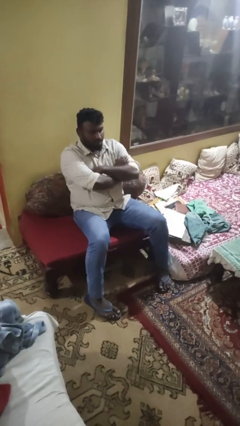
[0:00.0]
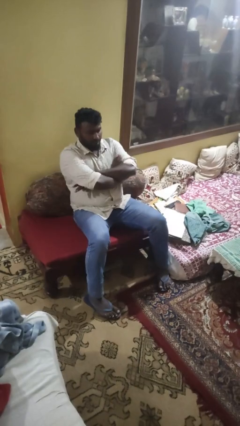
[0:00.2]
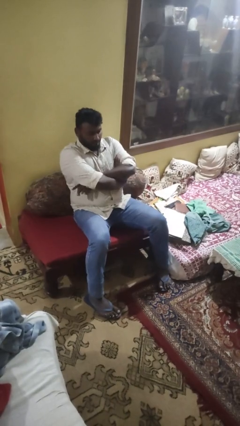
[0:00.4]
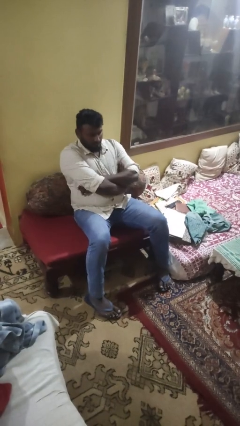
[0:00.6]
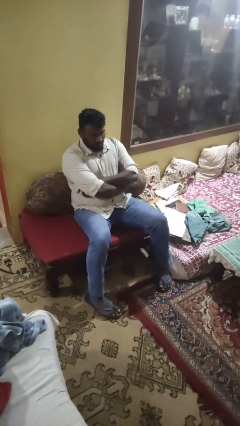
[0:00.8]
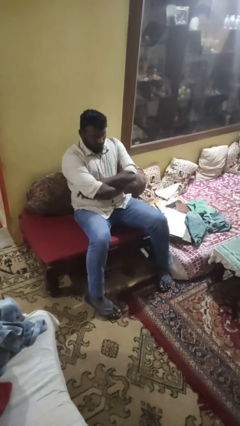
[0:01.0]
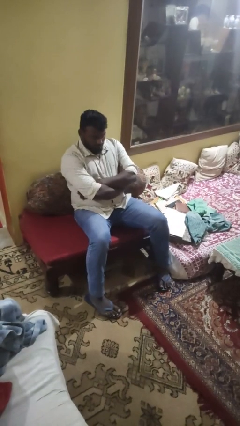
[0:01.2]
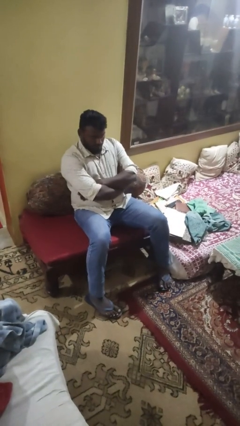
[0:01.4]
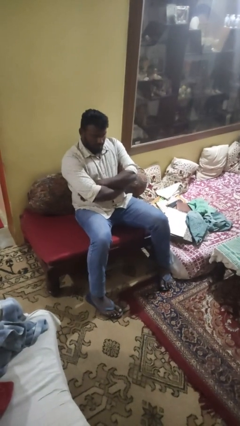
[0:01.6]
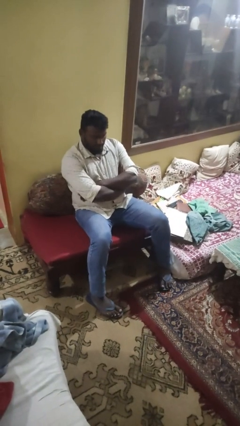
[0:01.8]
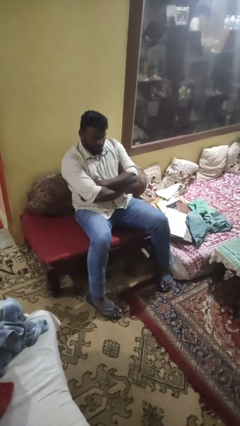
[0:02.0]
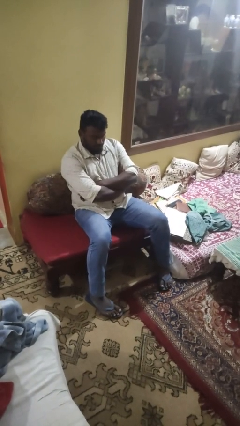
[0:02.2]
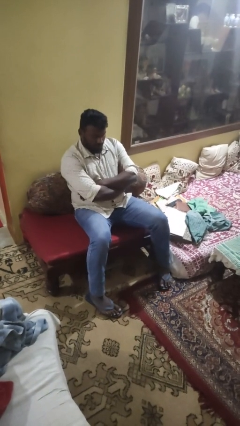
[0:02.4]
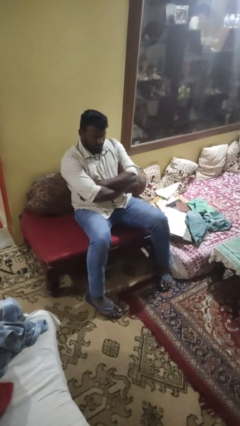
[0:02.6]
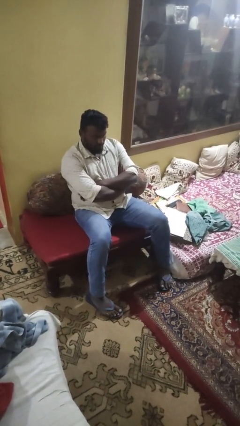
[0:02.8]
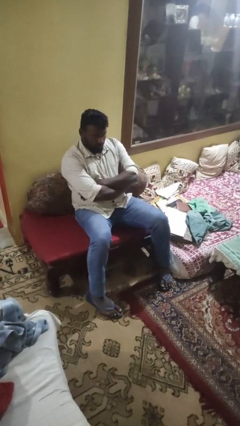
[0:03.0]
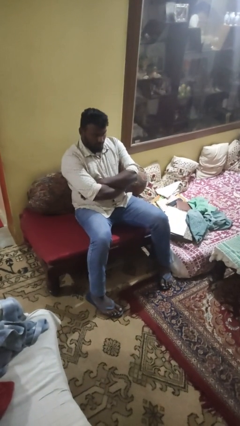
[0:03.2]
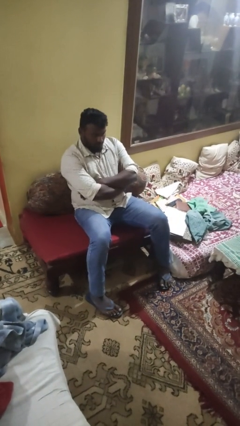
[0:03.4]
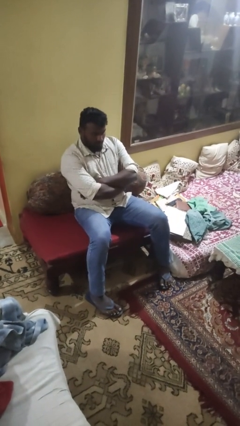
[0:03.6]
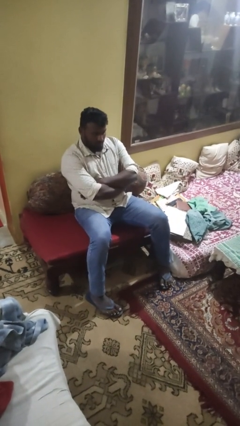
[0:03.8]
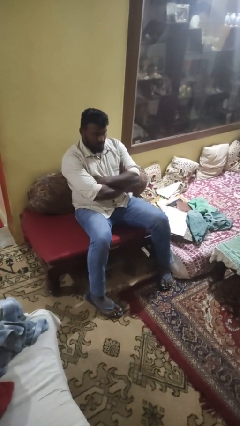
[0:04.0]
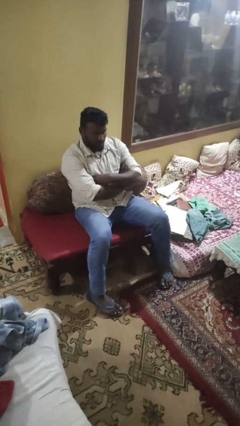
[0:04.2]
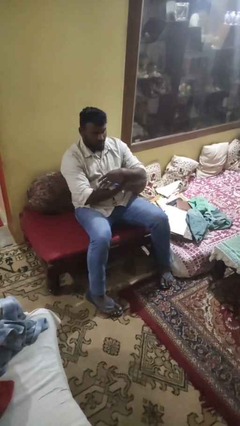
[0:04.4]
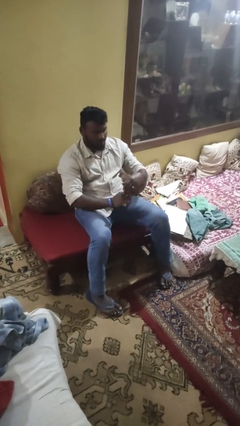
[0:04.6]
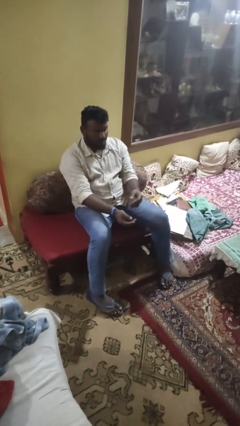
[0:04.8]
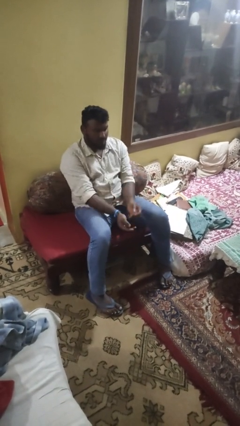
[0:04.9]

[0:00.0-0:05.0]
person crosses arms

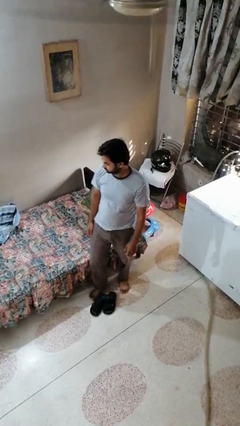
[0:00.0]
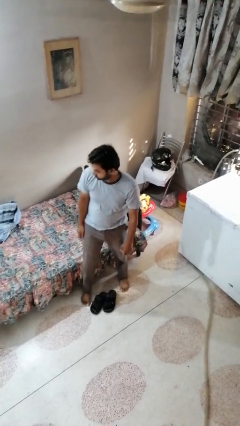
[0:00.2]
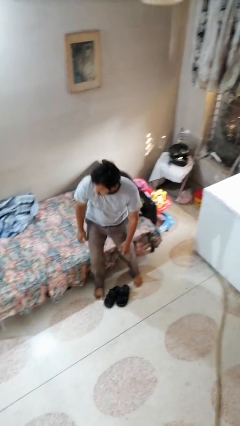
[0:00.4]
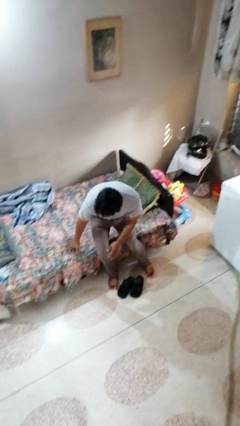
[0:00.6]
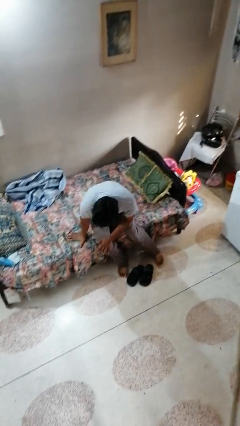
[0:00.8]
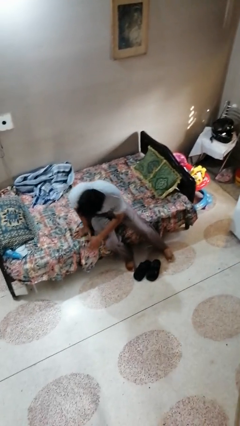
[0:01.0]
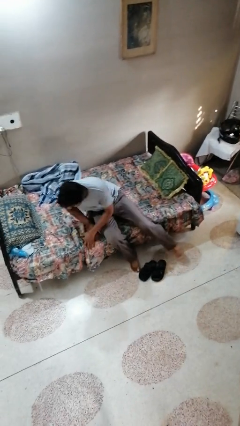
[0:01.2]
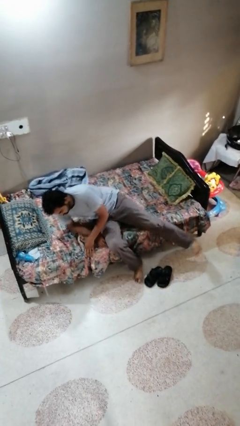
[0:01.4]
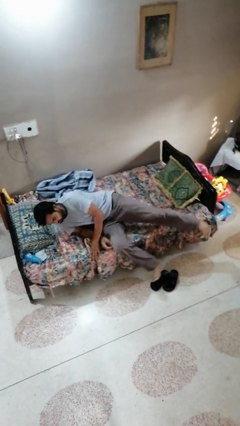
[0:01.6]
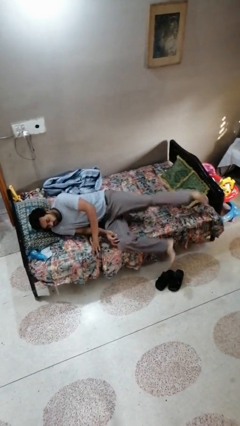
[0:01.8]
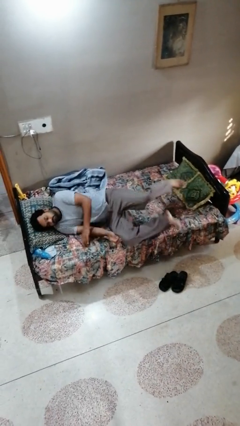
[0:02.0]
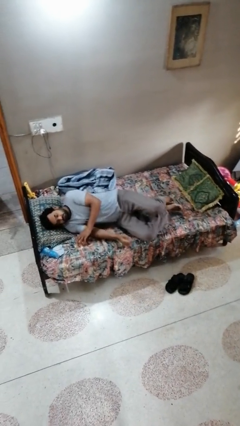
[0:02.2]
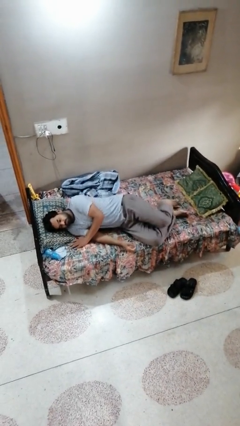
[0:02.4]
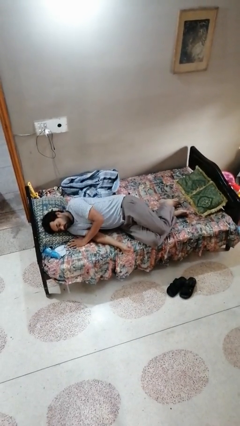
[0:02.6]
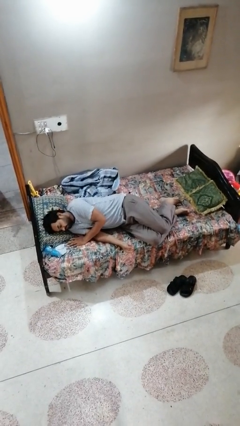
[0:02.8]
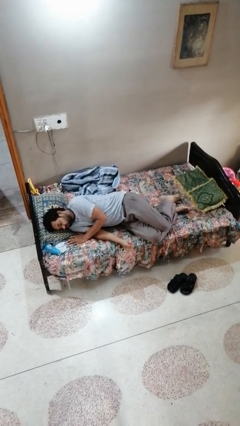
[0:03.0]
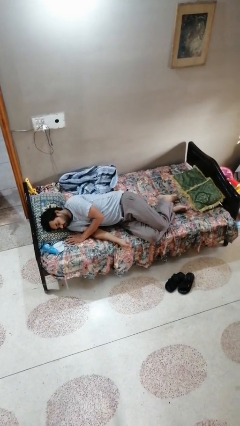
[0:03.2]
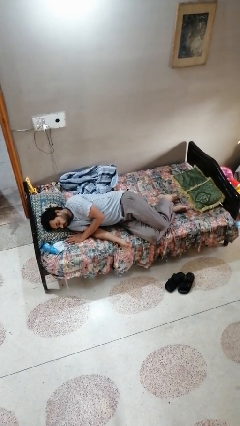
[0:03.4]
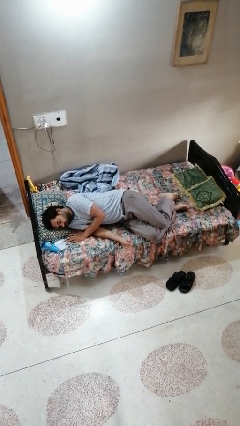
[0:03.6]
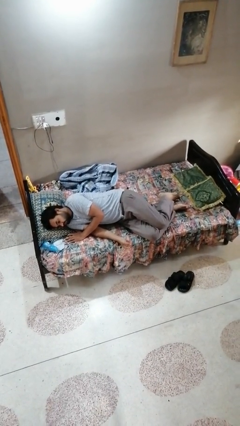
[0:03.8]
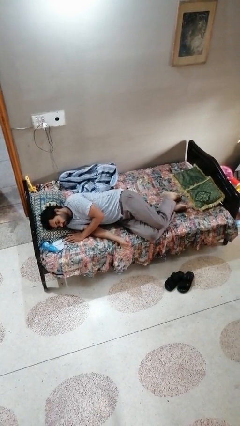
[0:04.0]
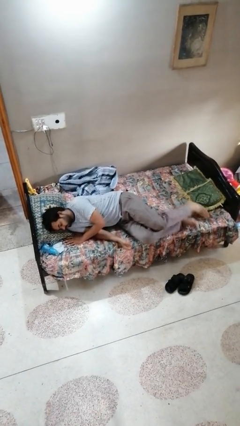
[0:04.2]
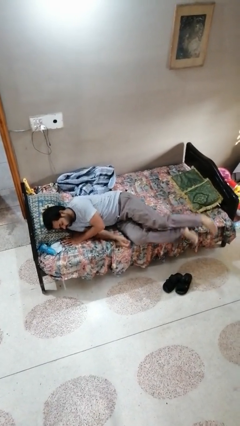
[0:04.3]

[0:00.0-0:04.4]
person lies down on bed

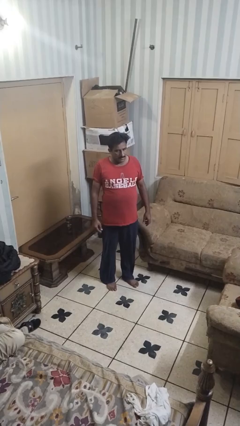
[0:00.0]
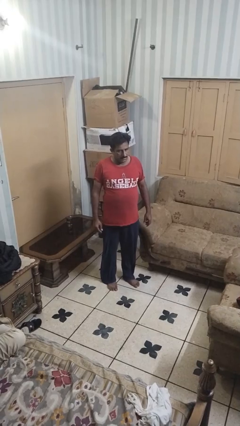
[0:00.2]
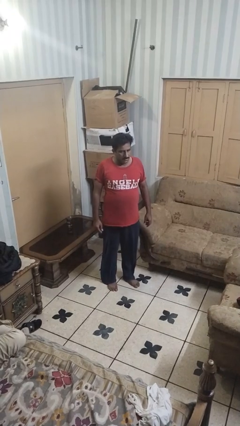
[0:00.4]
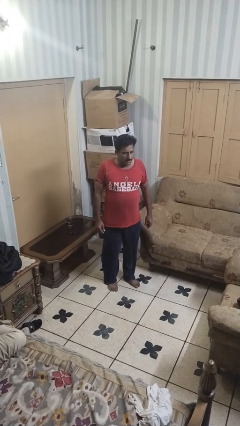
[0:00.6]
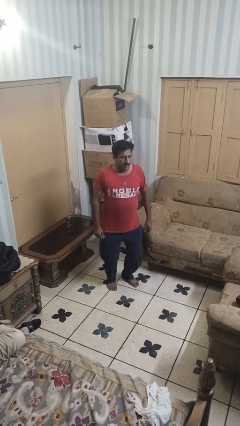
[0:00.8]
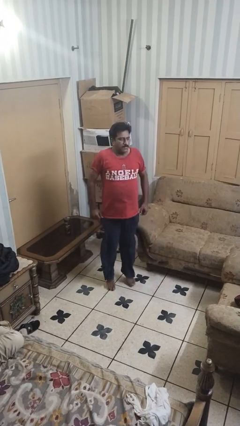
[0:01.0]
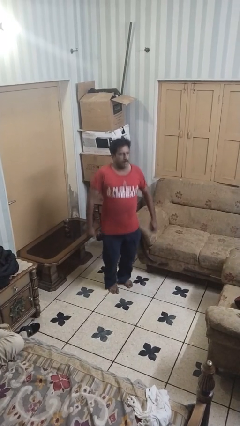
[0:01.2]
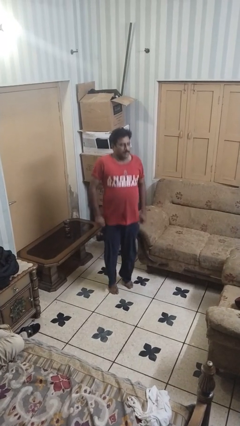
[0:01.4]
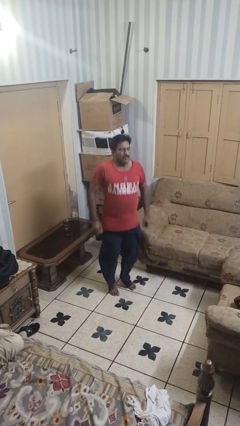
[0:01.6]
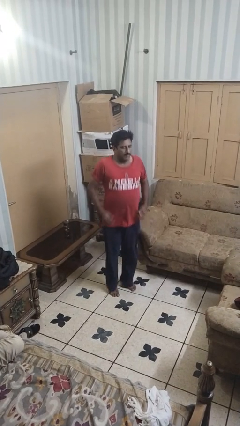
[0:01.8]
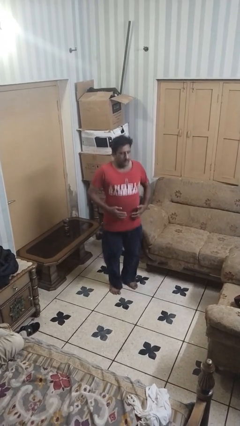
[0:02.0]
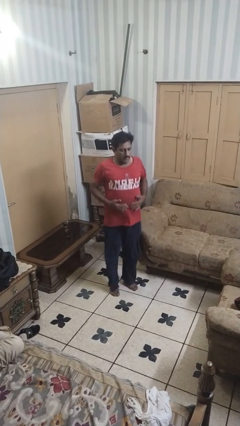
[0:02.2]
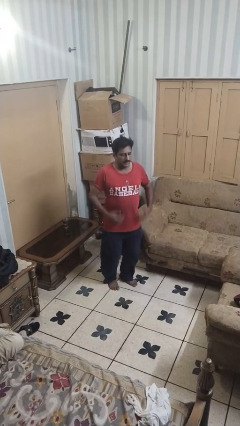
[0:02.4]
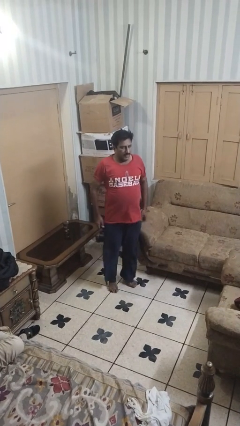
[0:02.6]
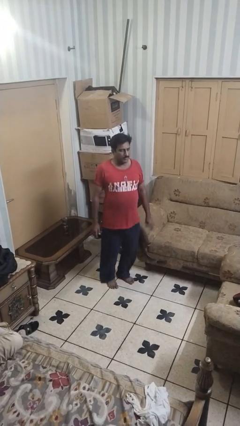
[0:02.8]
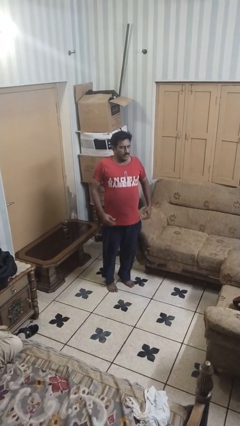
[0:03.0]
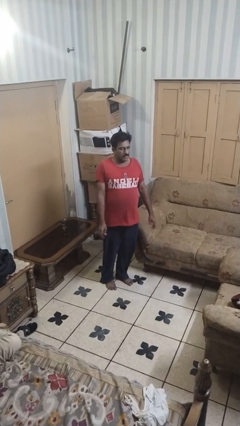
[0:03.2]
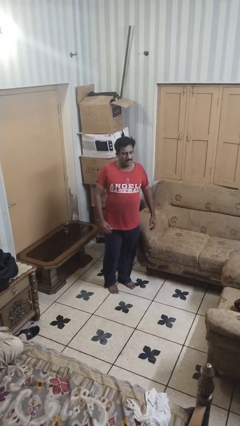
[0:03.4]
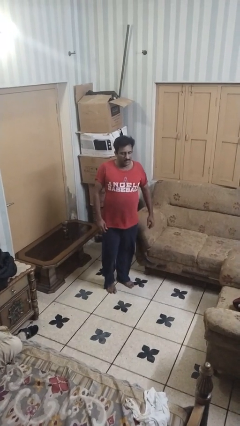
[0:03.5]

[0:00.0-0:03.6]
person jumps

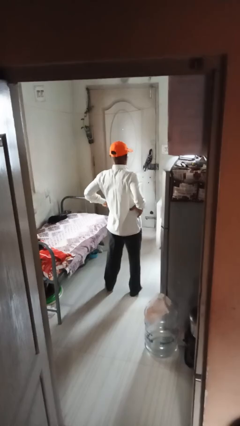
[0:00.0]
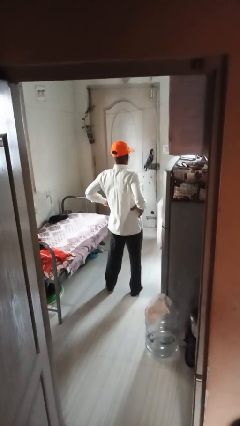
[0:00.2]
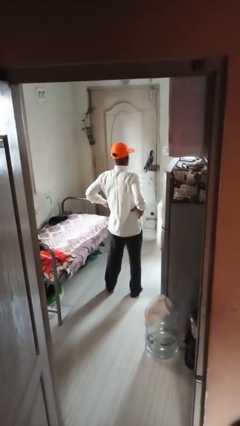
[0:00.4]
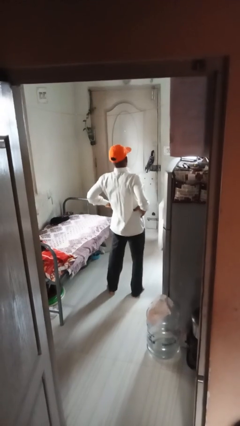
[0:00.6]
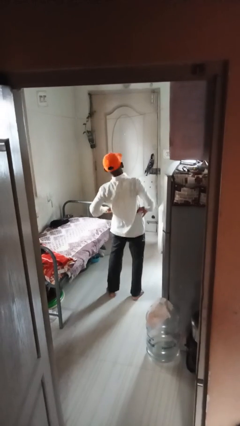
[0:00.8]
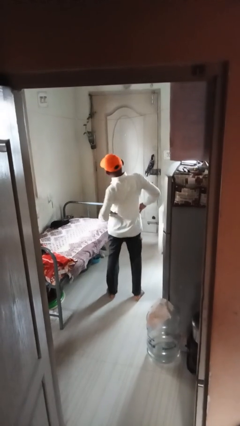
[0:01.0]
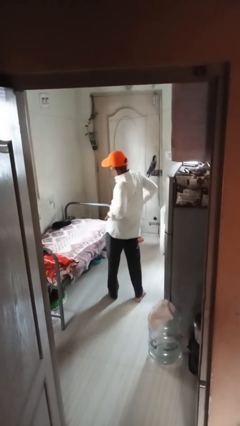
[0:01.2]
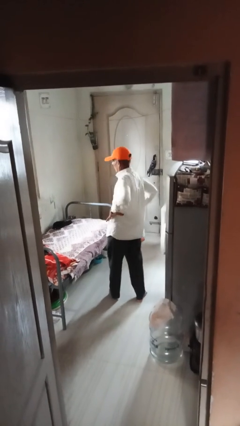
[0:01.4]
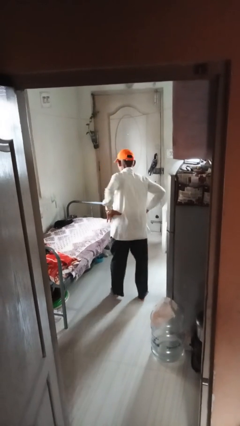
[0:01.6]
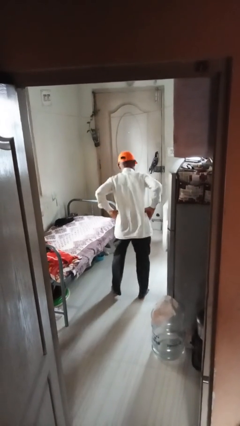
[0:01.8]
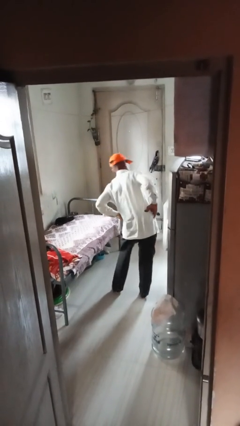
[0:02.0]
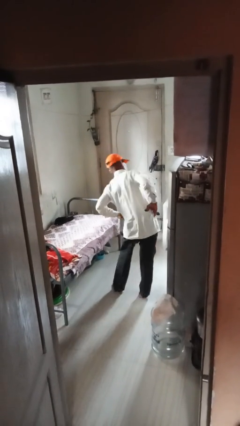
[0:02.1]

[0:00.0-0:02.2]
person wiggles hips

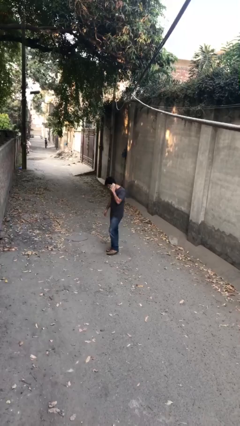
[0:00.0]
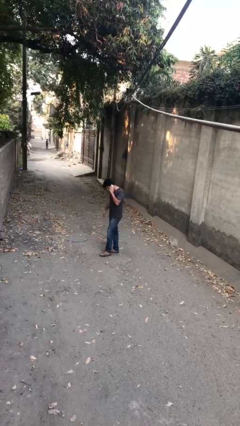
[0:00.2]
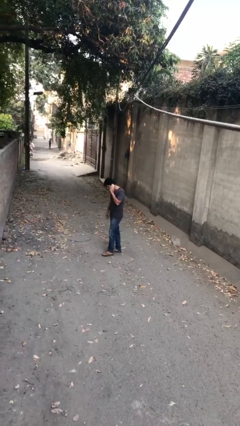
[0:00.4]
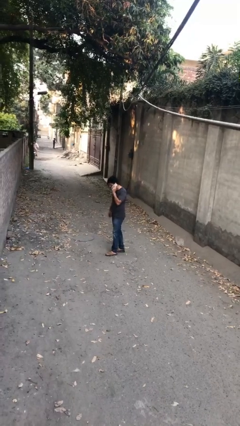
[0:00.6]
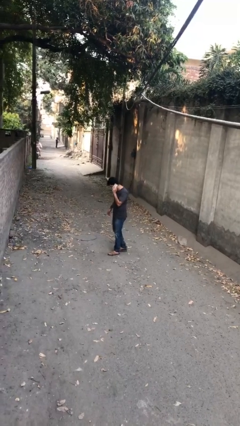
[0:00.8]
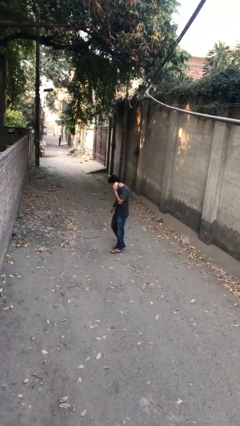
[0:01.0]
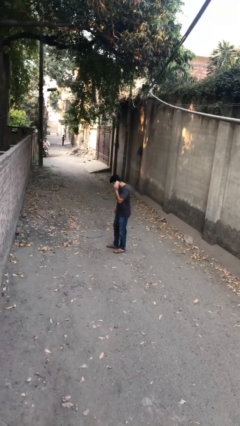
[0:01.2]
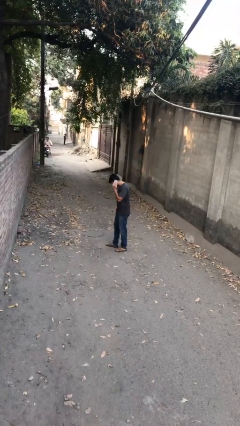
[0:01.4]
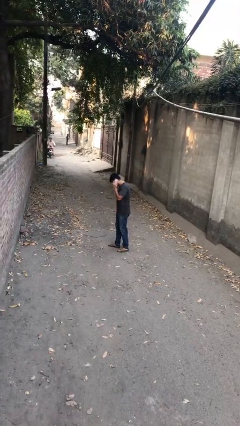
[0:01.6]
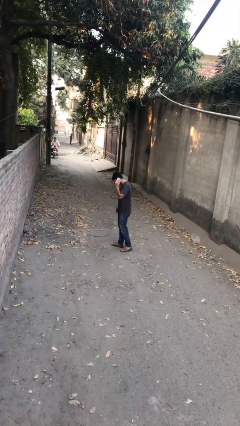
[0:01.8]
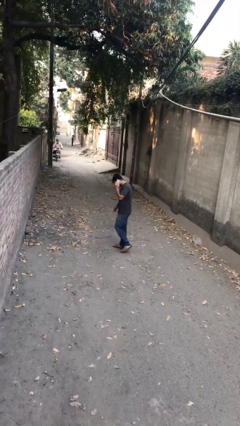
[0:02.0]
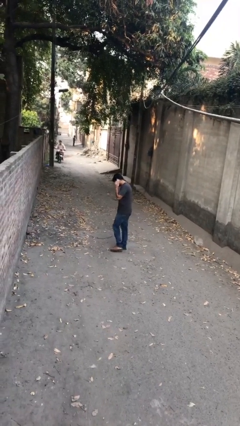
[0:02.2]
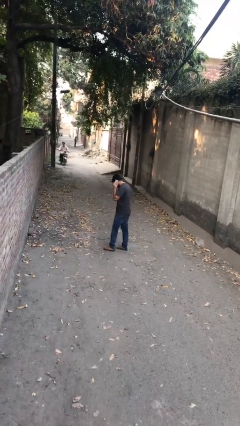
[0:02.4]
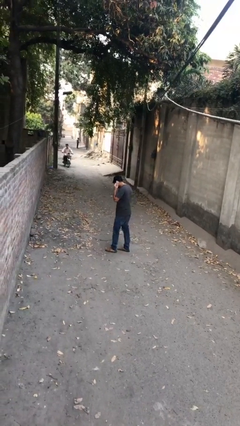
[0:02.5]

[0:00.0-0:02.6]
person talks on phone
